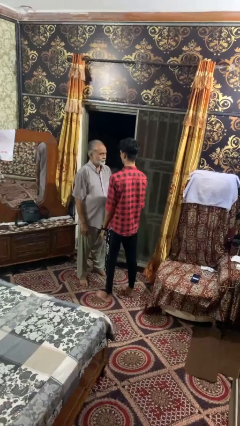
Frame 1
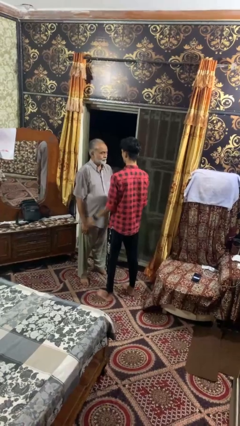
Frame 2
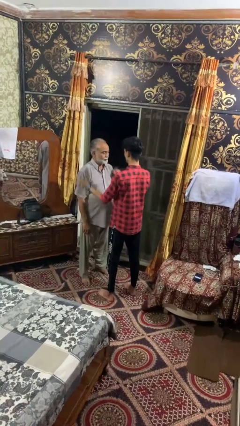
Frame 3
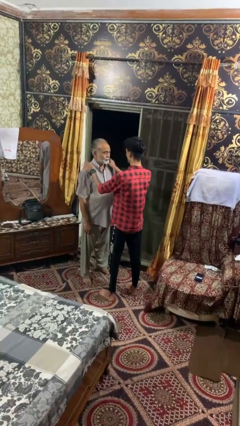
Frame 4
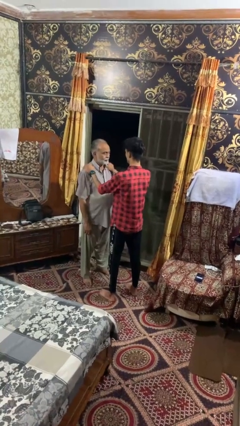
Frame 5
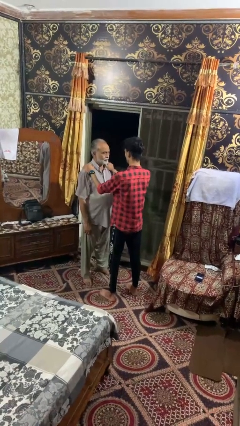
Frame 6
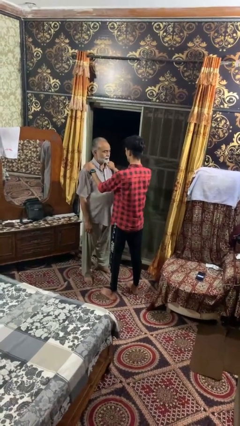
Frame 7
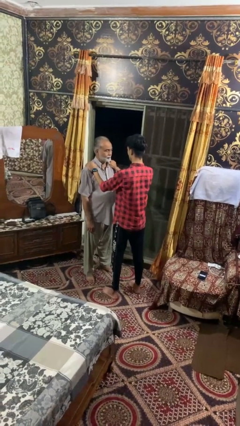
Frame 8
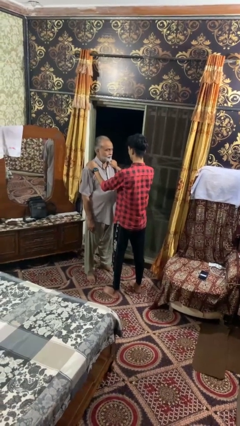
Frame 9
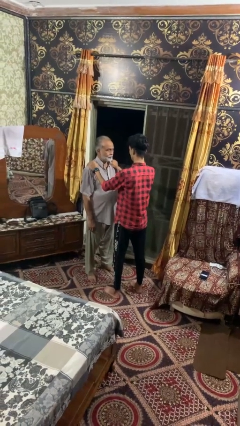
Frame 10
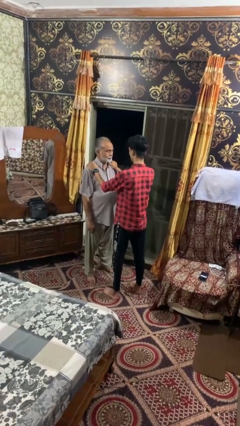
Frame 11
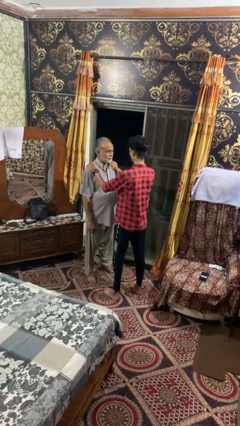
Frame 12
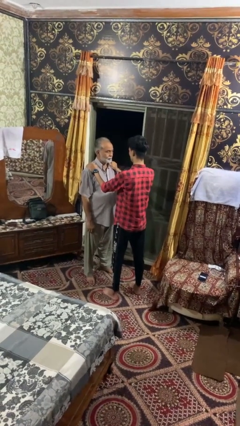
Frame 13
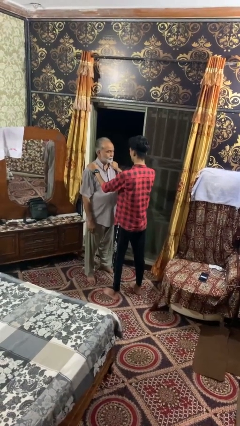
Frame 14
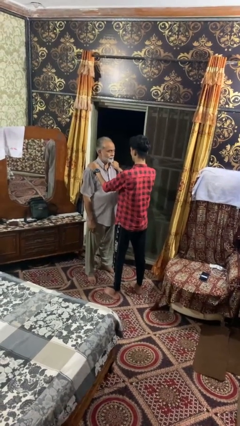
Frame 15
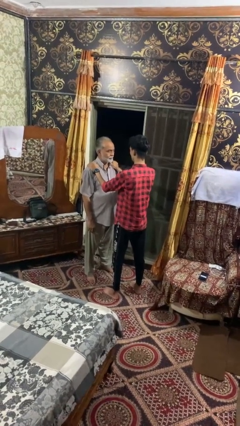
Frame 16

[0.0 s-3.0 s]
person pounds shoulders of person

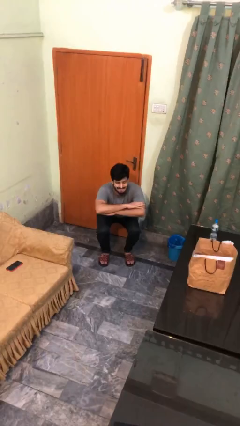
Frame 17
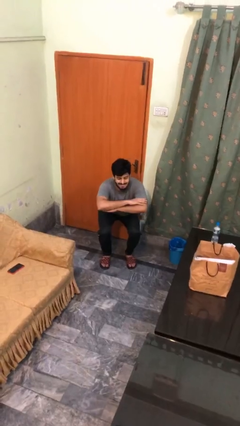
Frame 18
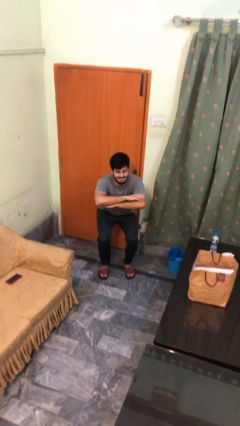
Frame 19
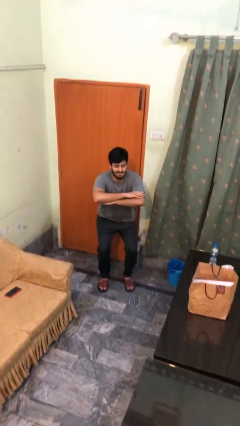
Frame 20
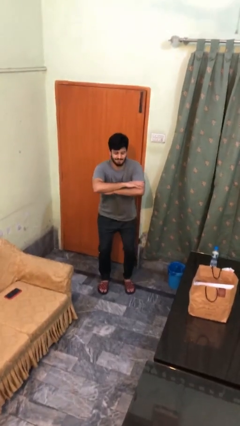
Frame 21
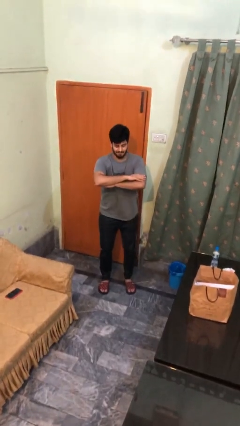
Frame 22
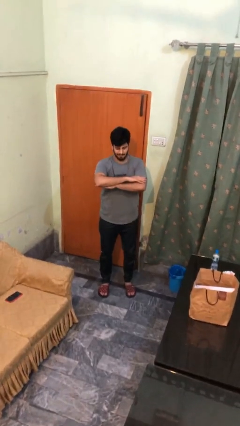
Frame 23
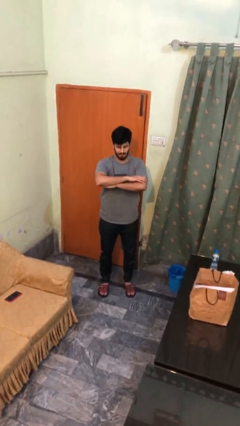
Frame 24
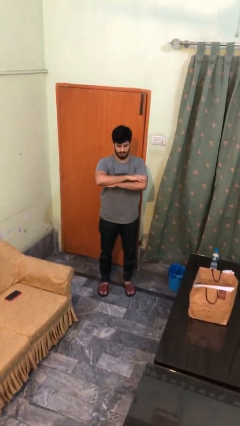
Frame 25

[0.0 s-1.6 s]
person stands up

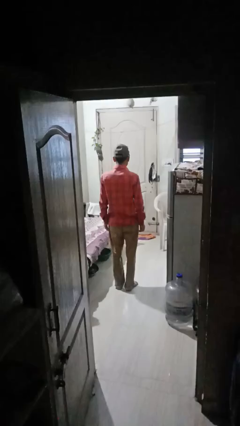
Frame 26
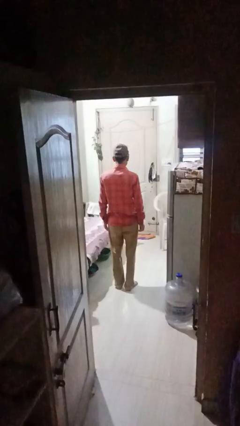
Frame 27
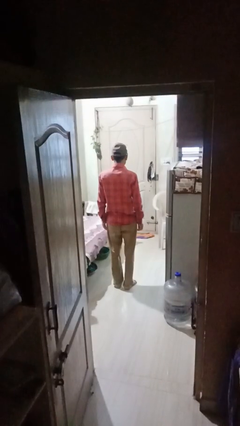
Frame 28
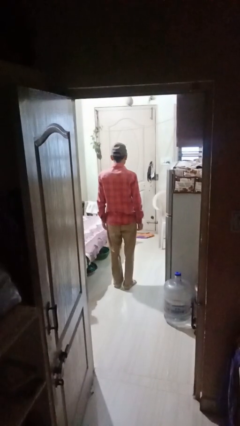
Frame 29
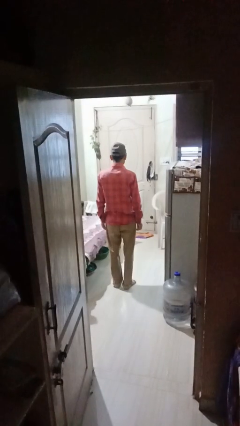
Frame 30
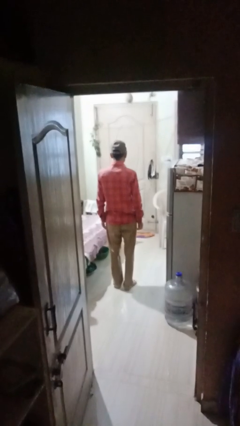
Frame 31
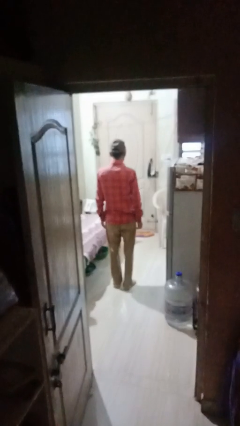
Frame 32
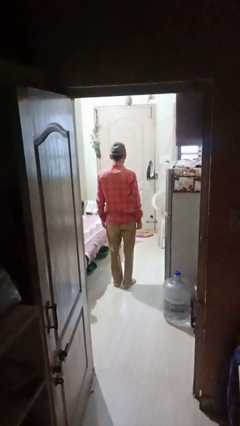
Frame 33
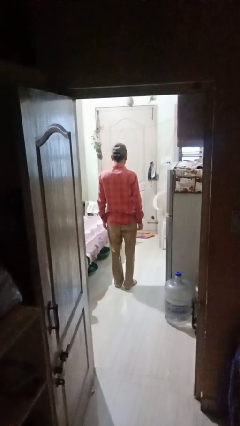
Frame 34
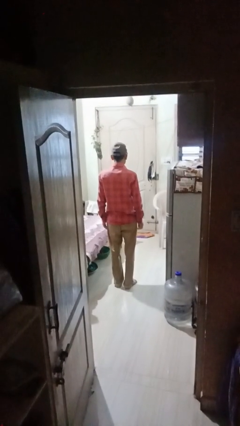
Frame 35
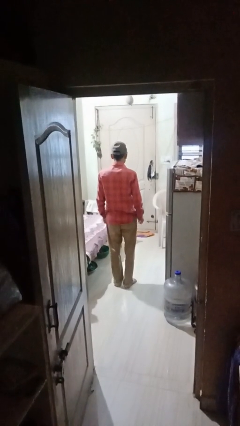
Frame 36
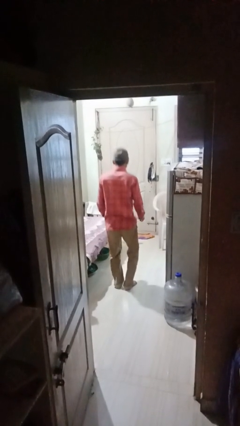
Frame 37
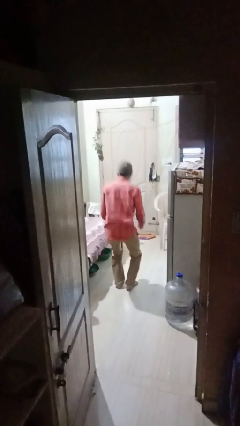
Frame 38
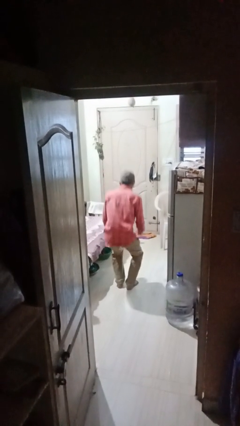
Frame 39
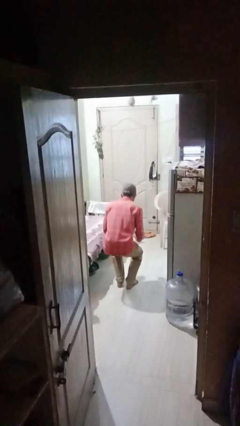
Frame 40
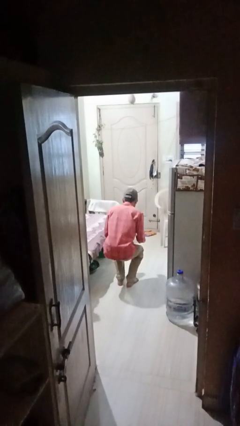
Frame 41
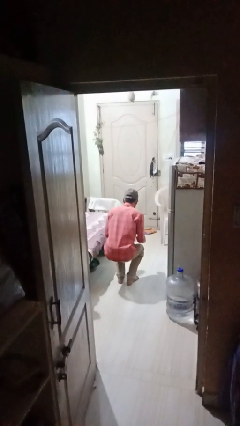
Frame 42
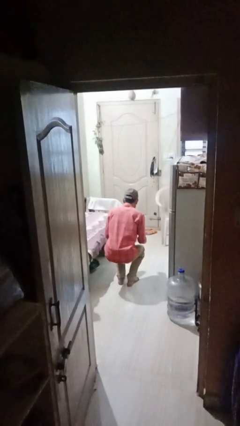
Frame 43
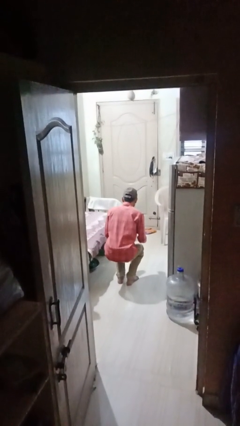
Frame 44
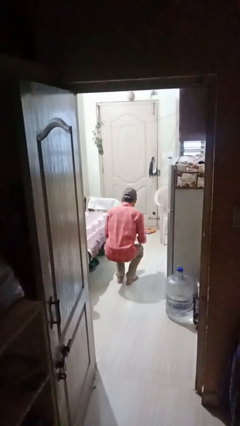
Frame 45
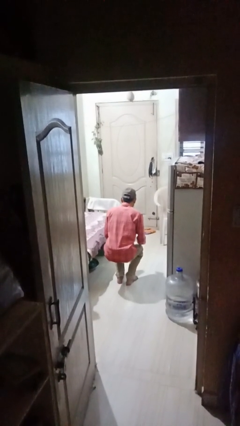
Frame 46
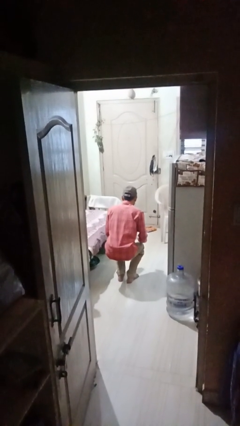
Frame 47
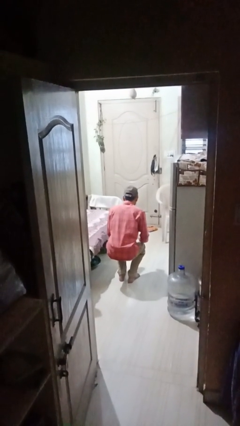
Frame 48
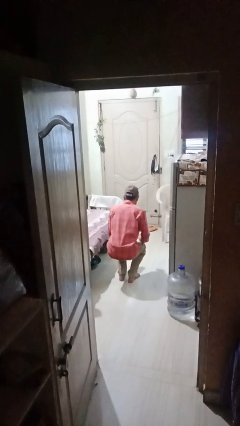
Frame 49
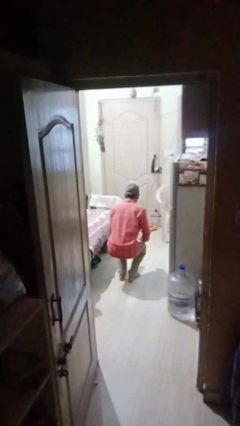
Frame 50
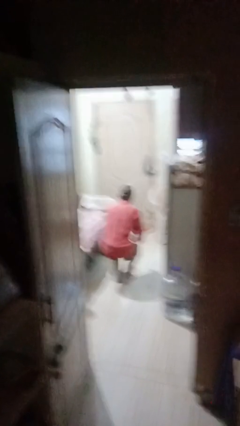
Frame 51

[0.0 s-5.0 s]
person squats

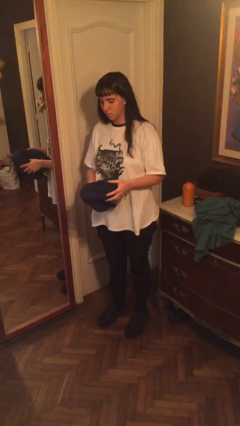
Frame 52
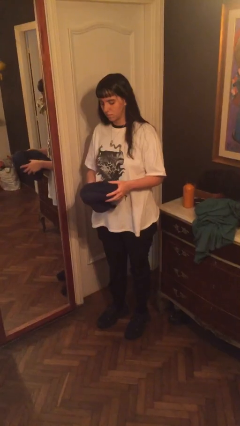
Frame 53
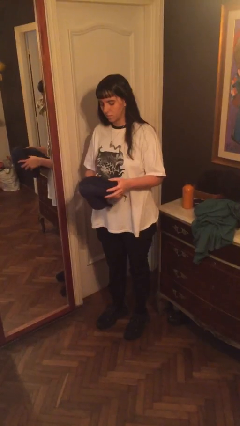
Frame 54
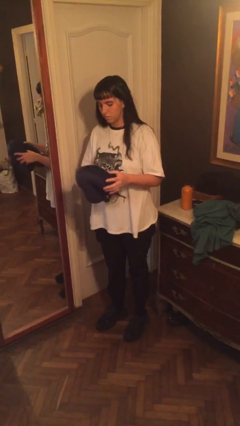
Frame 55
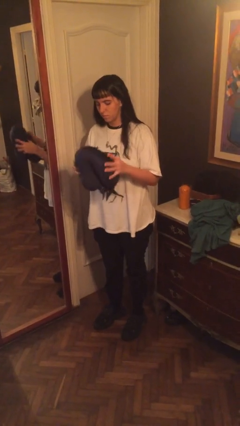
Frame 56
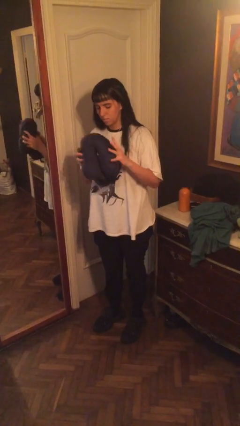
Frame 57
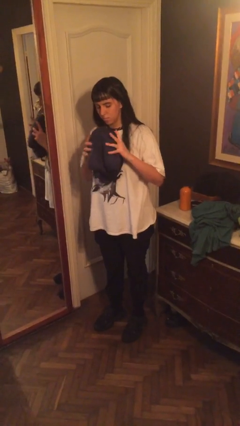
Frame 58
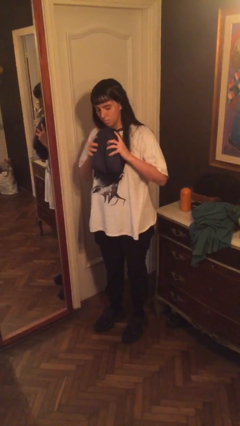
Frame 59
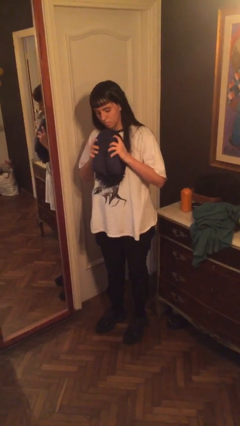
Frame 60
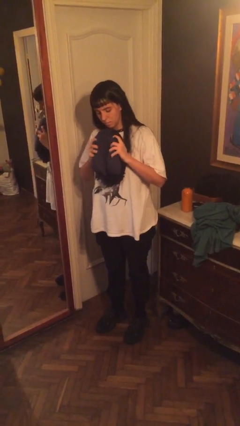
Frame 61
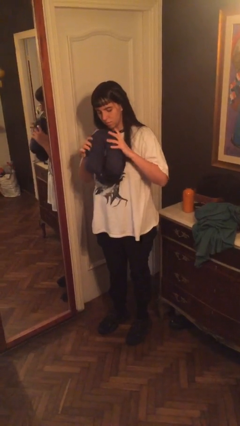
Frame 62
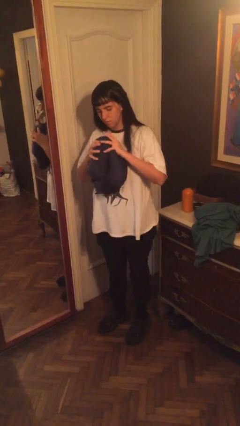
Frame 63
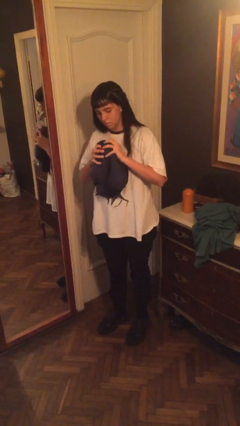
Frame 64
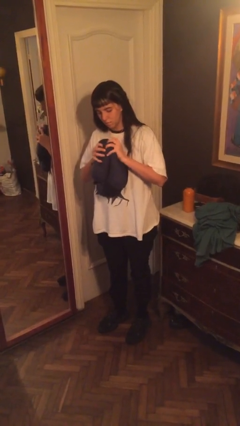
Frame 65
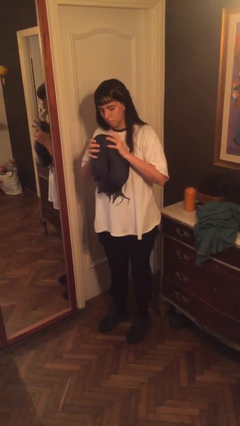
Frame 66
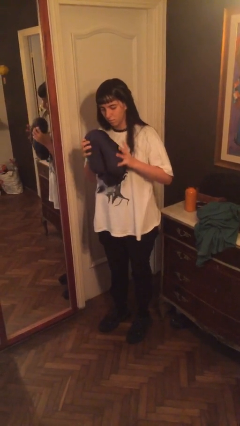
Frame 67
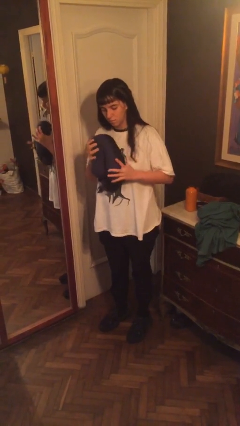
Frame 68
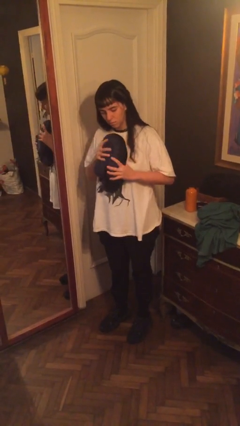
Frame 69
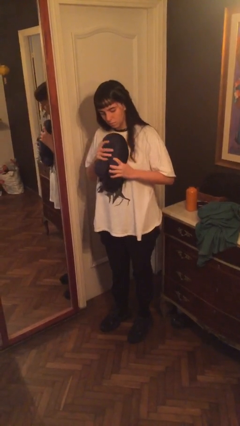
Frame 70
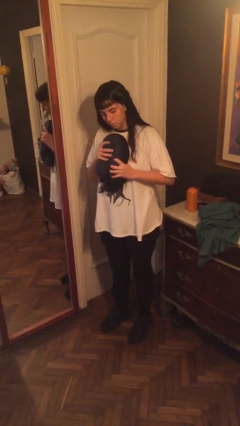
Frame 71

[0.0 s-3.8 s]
person squeezes object

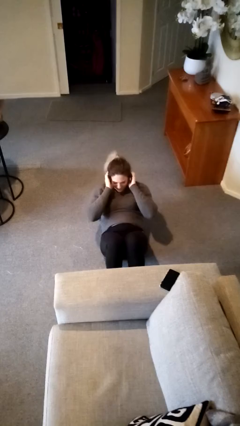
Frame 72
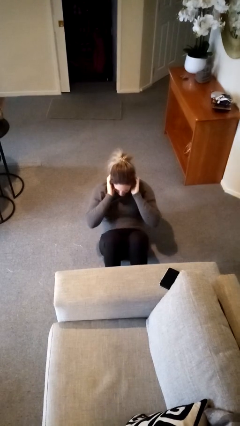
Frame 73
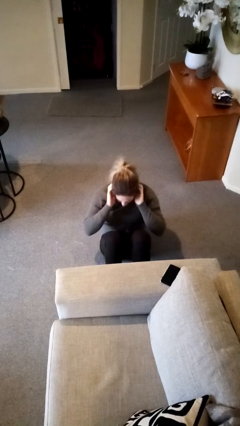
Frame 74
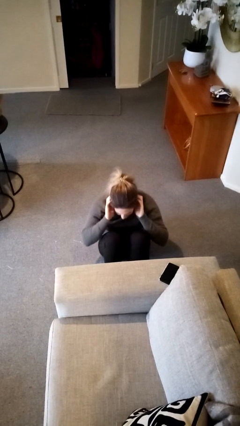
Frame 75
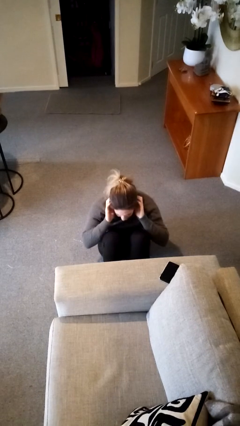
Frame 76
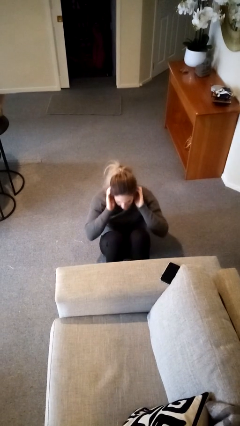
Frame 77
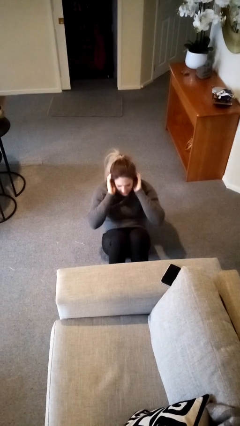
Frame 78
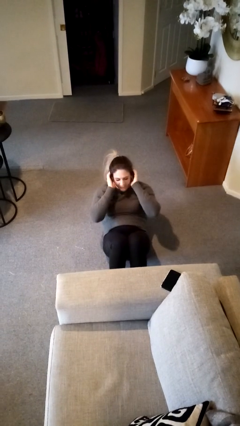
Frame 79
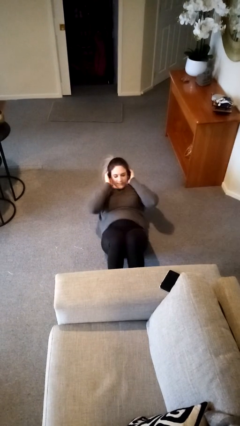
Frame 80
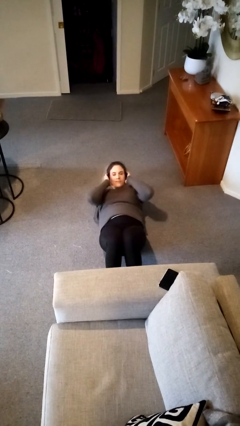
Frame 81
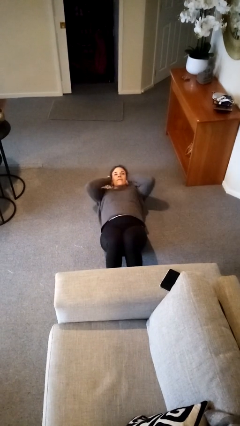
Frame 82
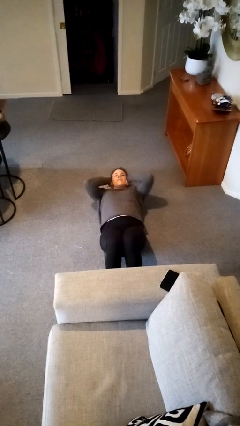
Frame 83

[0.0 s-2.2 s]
person exercises with situp

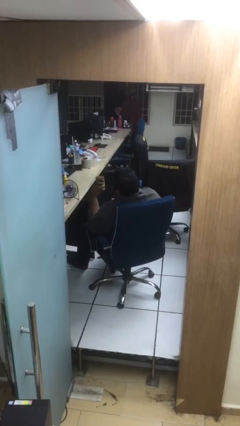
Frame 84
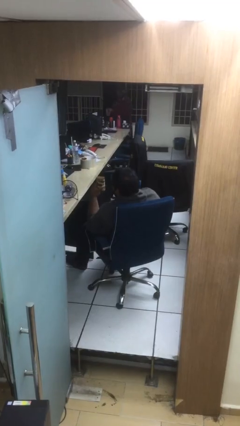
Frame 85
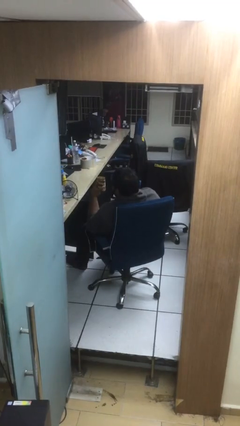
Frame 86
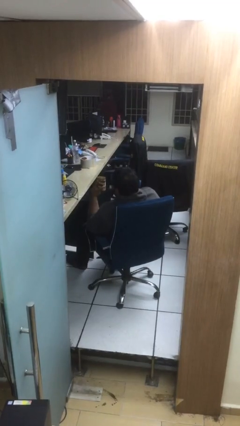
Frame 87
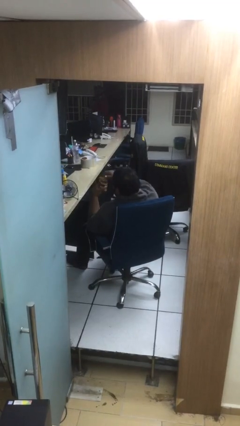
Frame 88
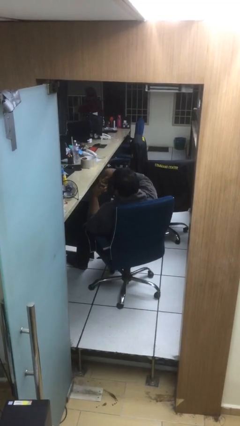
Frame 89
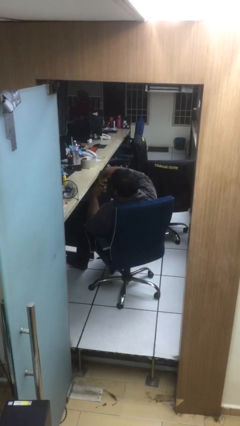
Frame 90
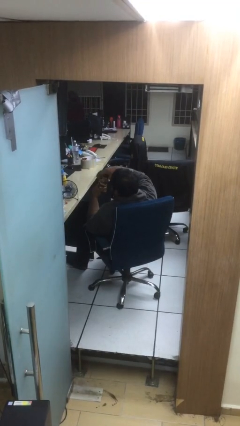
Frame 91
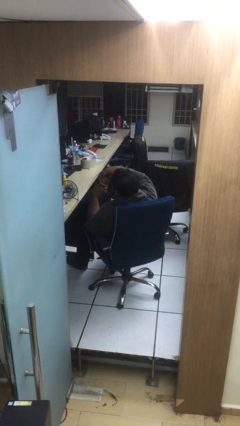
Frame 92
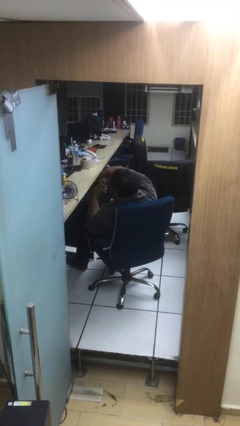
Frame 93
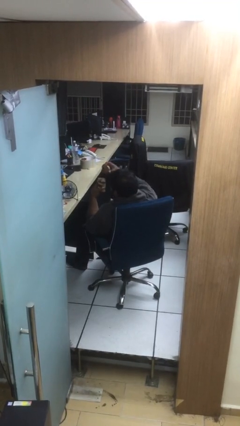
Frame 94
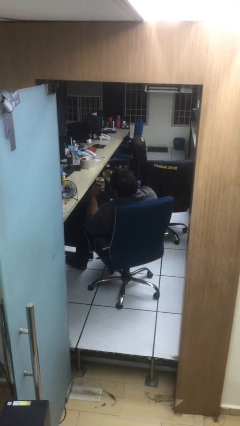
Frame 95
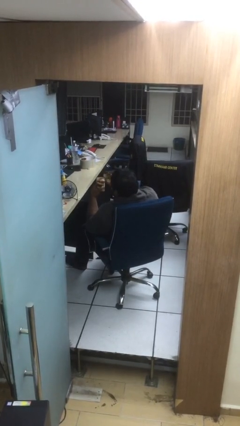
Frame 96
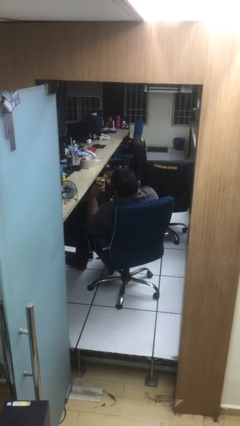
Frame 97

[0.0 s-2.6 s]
person opens jar
